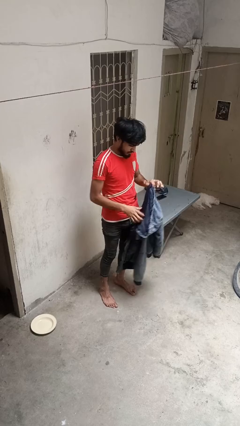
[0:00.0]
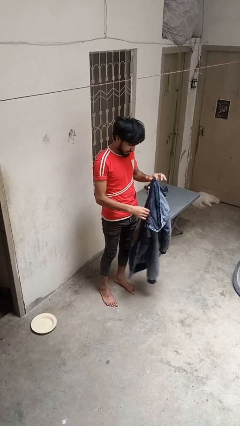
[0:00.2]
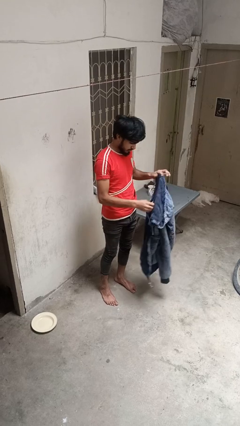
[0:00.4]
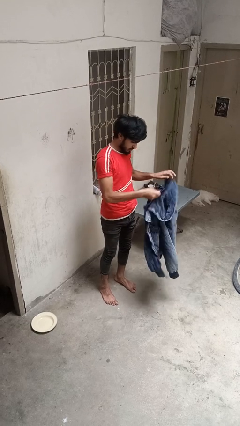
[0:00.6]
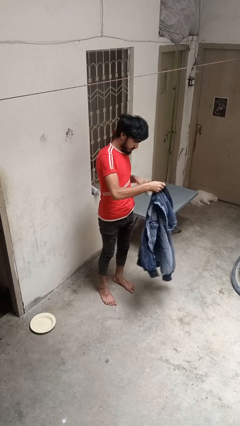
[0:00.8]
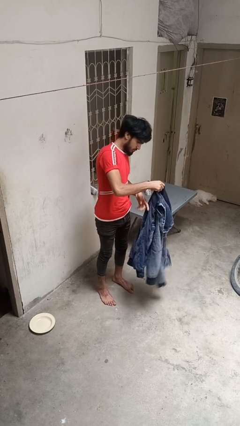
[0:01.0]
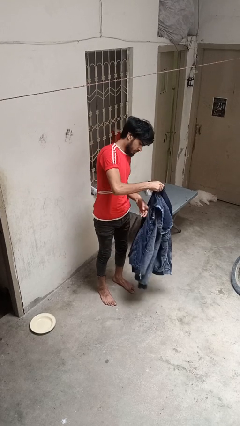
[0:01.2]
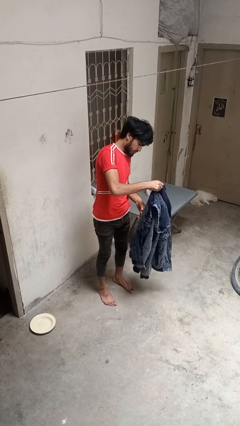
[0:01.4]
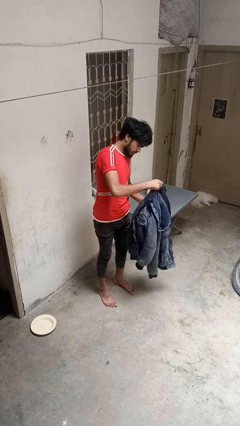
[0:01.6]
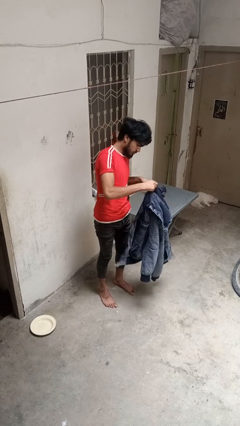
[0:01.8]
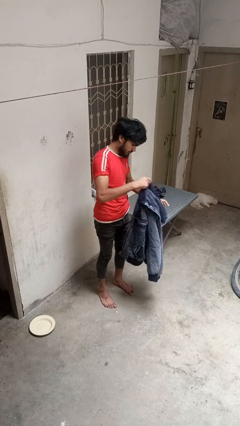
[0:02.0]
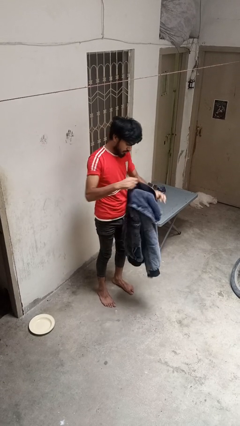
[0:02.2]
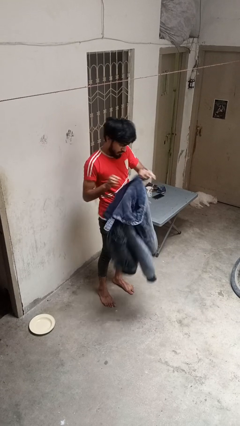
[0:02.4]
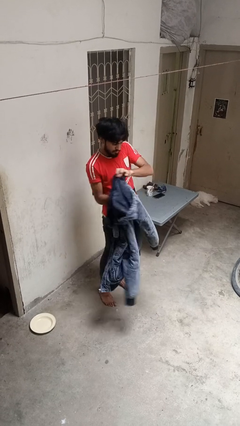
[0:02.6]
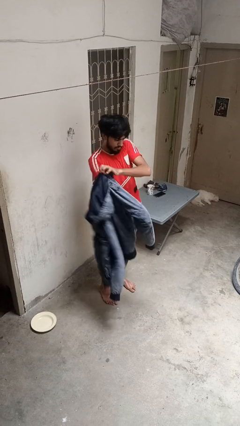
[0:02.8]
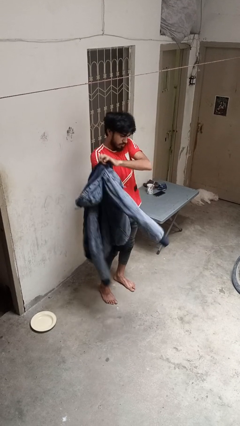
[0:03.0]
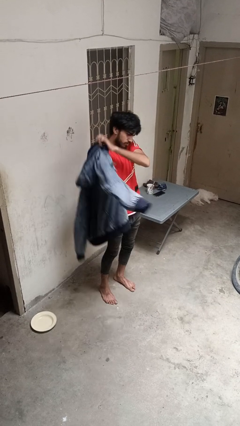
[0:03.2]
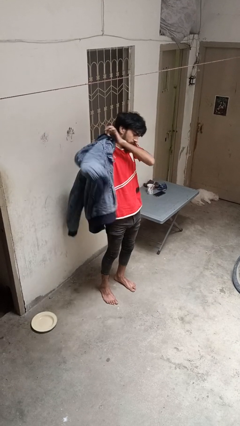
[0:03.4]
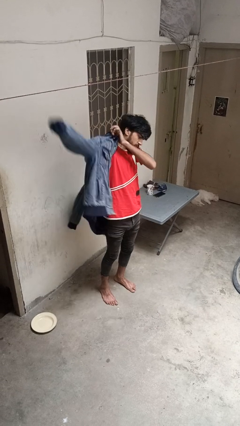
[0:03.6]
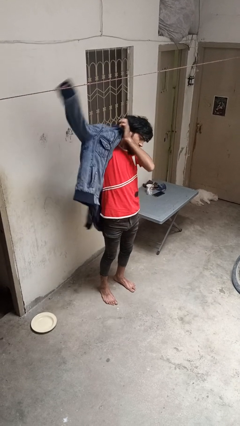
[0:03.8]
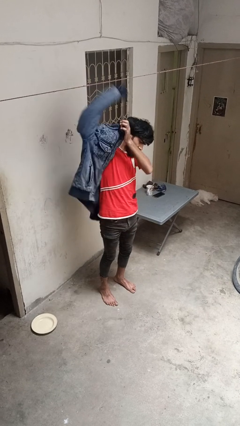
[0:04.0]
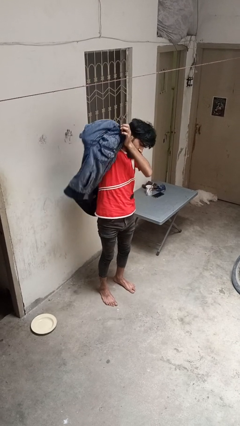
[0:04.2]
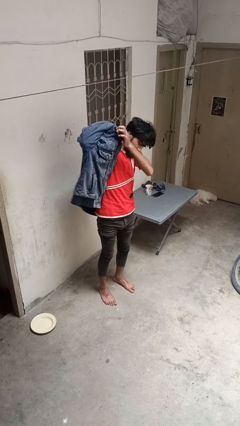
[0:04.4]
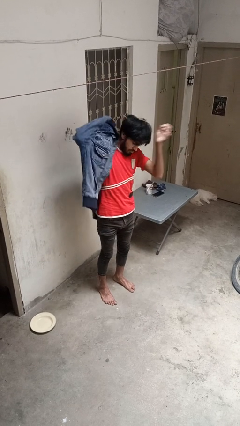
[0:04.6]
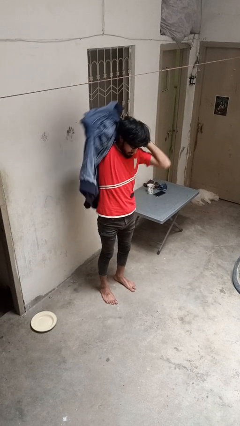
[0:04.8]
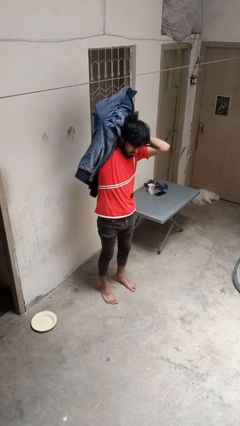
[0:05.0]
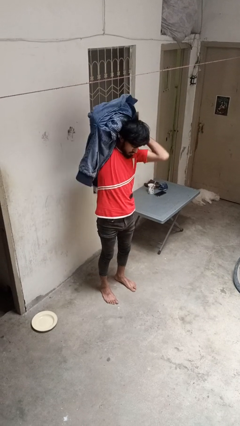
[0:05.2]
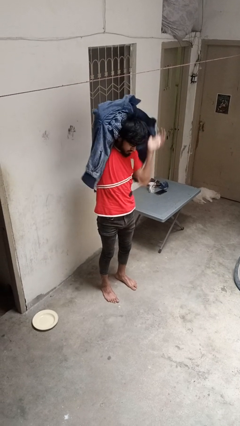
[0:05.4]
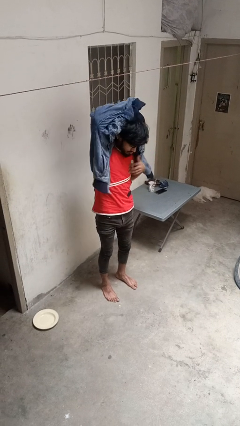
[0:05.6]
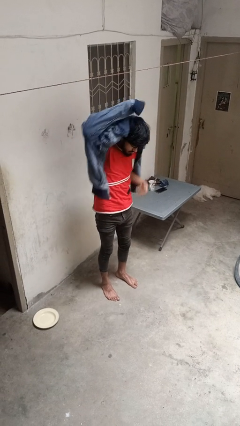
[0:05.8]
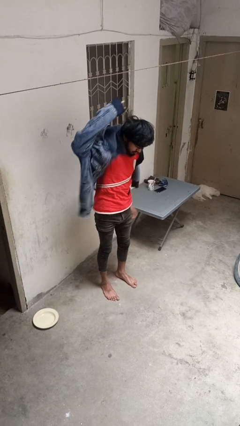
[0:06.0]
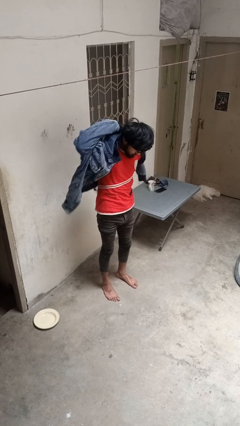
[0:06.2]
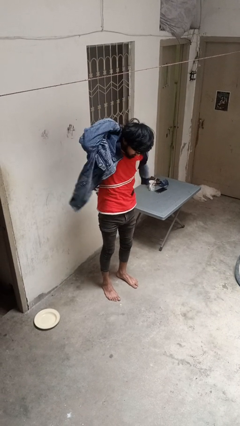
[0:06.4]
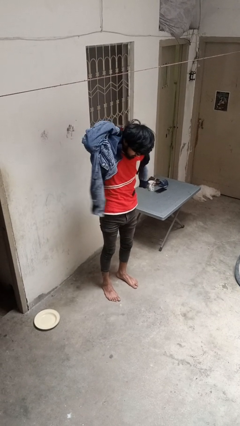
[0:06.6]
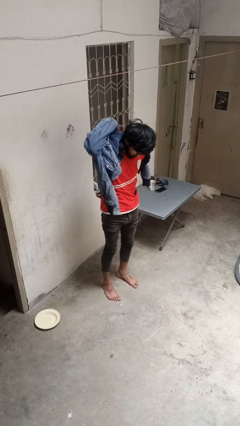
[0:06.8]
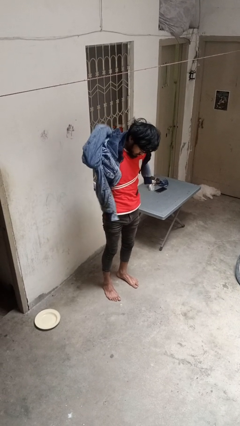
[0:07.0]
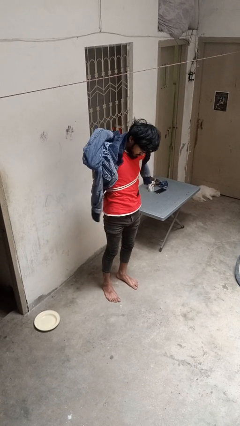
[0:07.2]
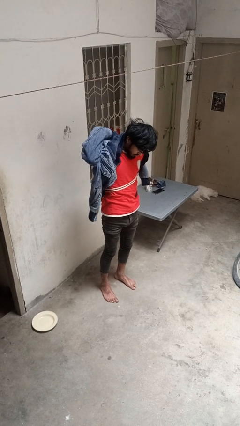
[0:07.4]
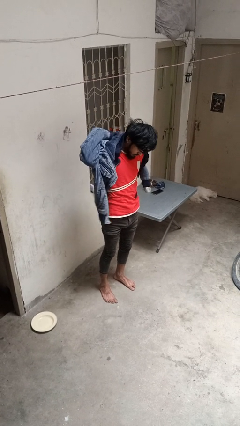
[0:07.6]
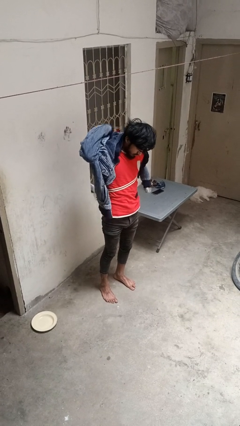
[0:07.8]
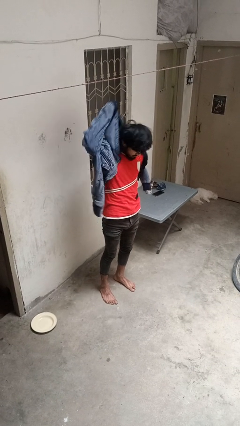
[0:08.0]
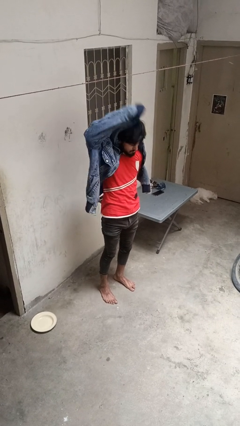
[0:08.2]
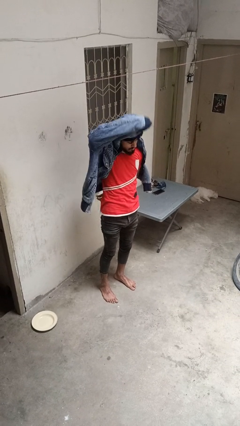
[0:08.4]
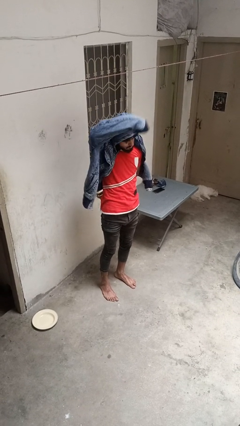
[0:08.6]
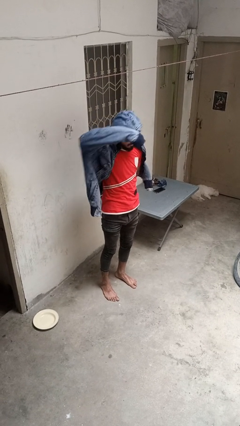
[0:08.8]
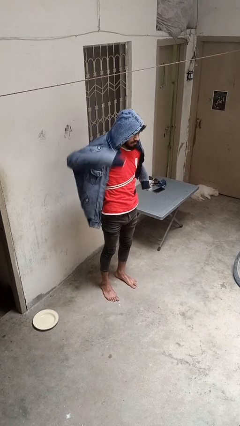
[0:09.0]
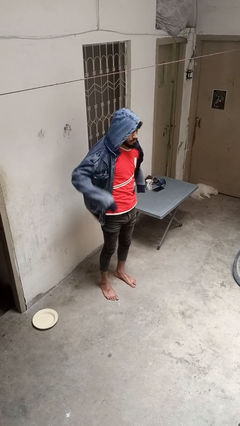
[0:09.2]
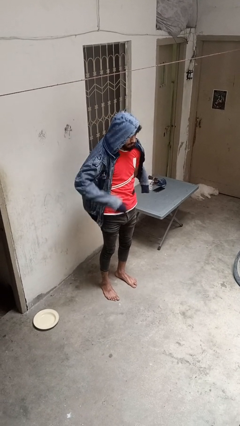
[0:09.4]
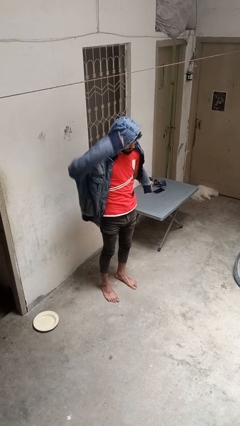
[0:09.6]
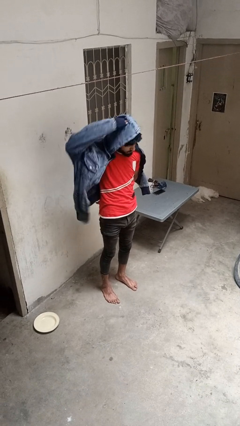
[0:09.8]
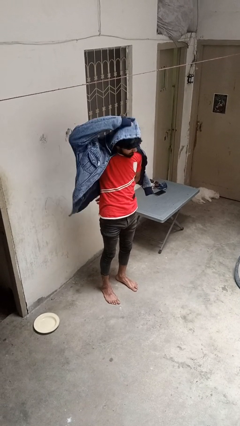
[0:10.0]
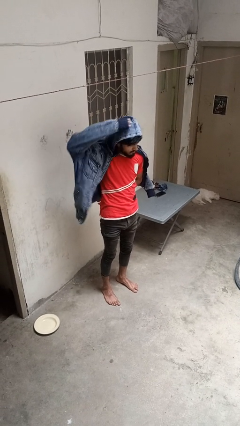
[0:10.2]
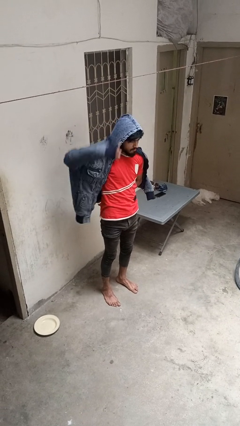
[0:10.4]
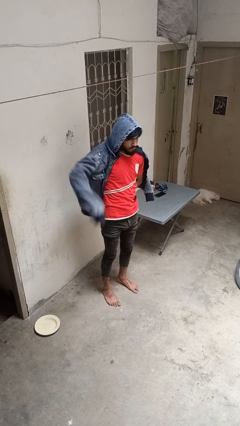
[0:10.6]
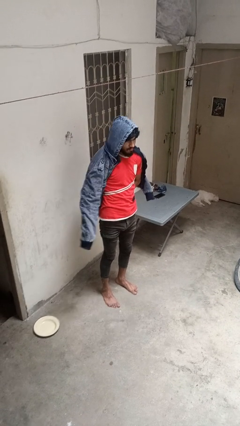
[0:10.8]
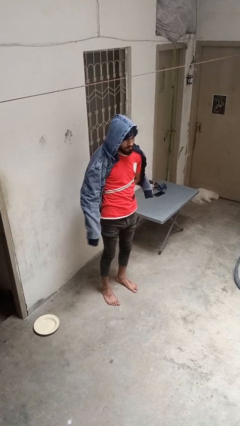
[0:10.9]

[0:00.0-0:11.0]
person puts on hoodie

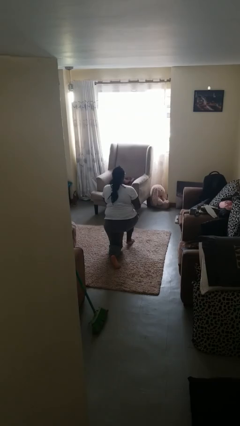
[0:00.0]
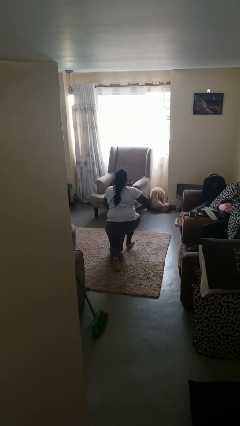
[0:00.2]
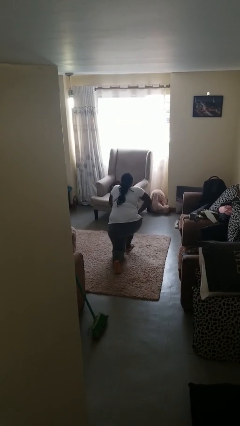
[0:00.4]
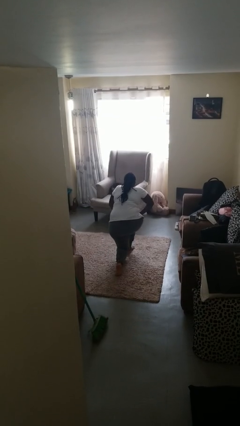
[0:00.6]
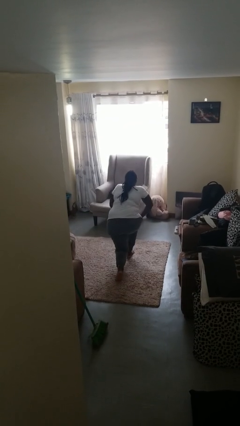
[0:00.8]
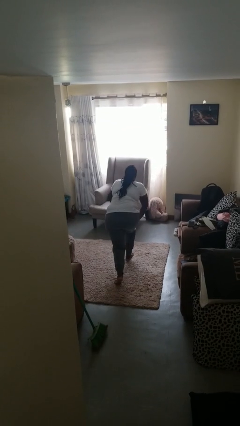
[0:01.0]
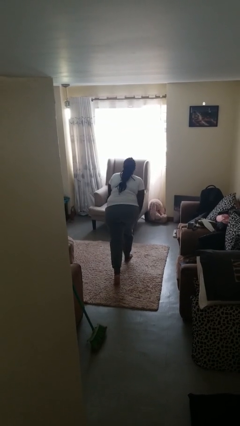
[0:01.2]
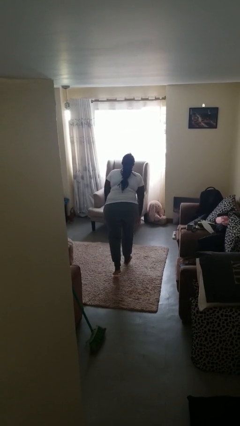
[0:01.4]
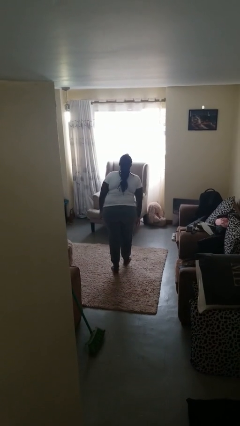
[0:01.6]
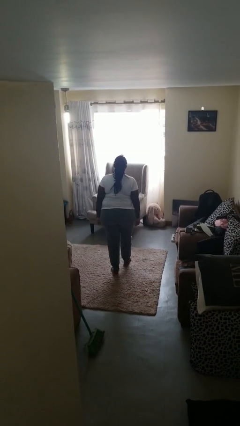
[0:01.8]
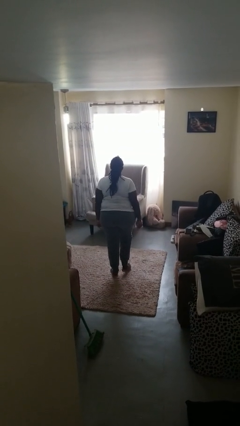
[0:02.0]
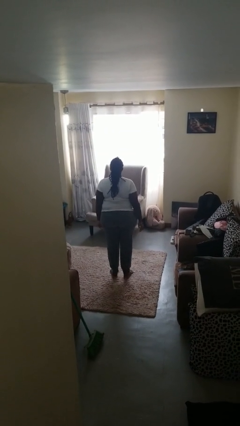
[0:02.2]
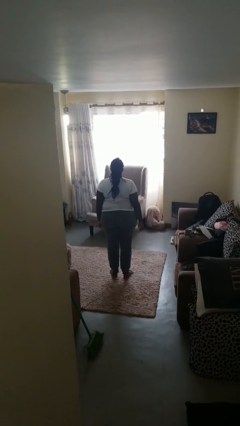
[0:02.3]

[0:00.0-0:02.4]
person stands up from floor

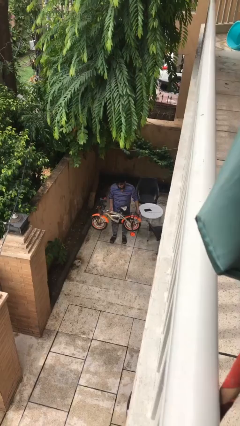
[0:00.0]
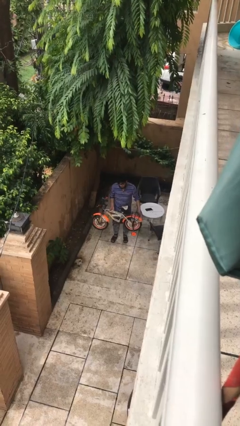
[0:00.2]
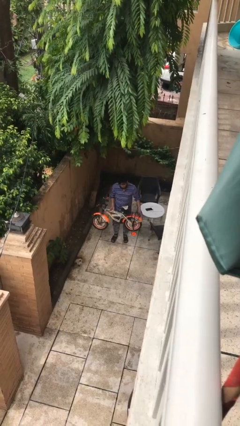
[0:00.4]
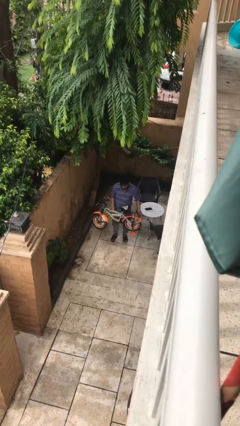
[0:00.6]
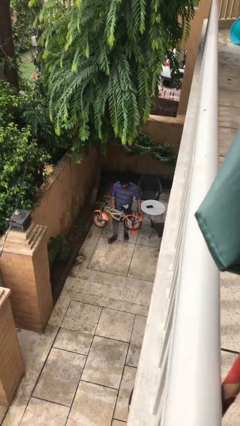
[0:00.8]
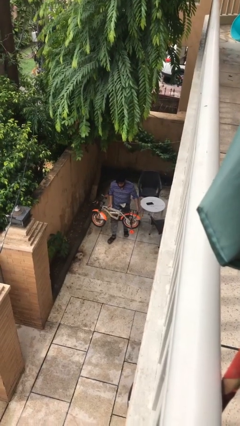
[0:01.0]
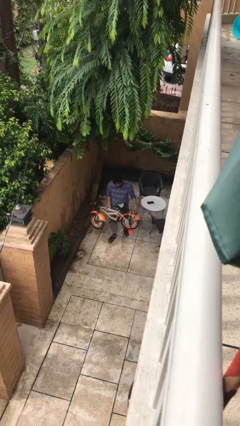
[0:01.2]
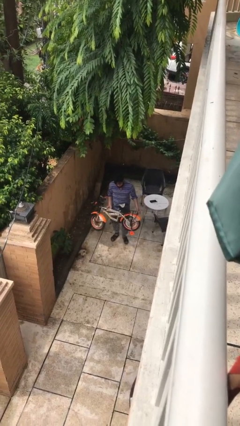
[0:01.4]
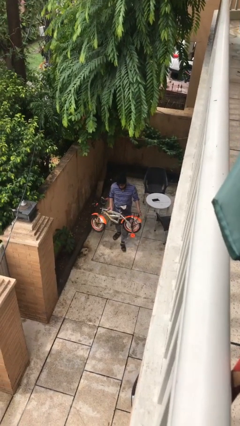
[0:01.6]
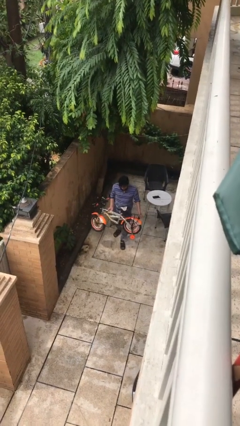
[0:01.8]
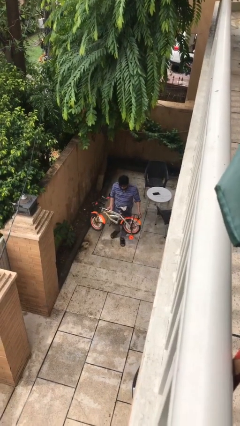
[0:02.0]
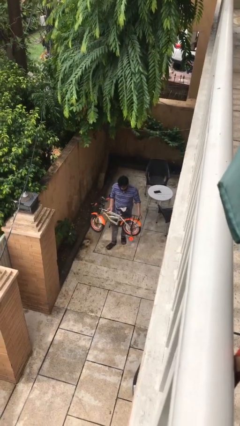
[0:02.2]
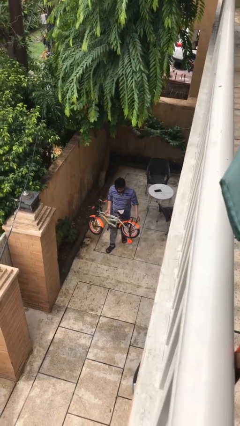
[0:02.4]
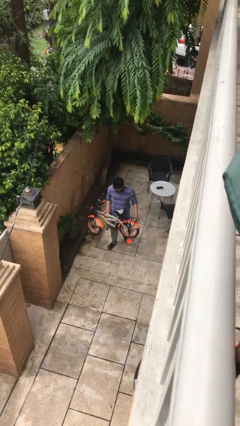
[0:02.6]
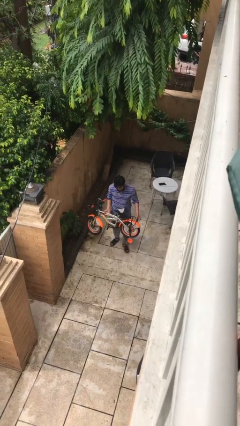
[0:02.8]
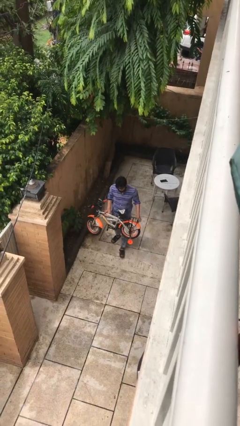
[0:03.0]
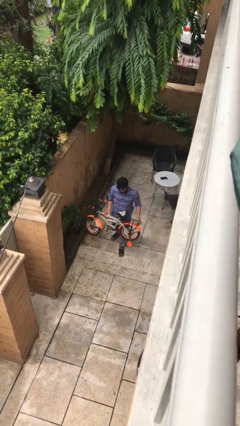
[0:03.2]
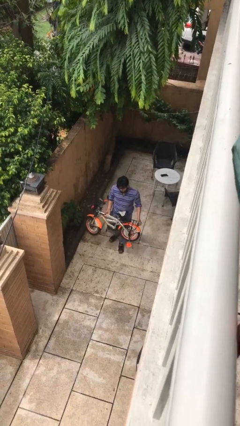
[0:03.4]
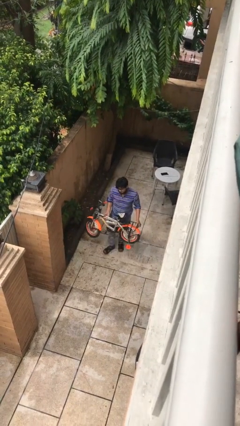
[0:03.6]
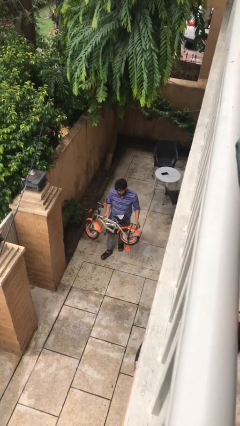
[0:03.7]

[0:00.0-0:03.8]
person carries heavy object

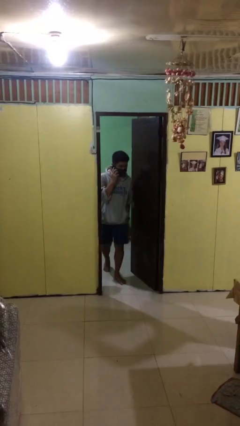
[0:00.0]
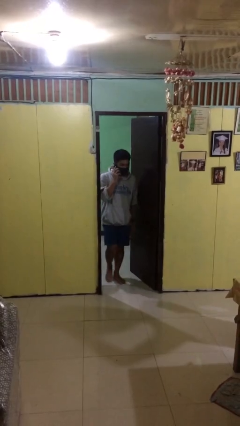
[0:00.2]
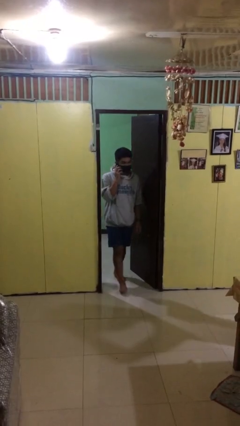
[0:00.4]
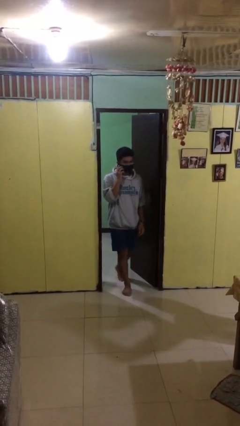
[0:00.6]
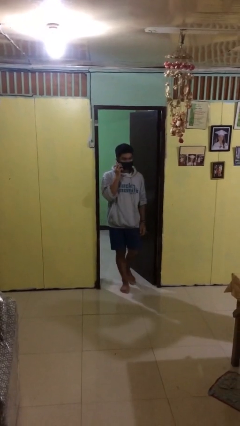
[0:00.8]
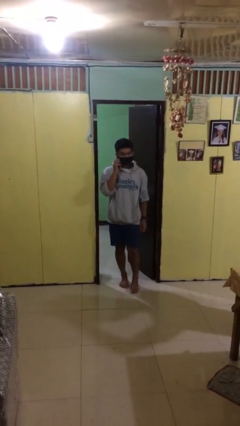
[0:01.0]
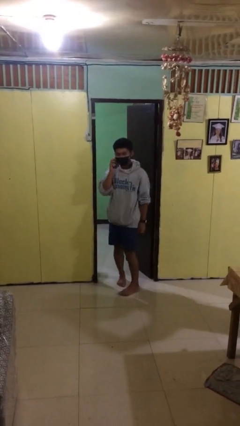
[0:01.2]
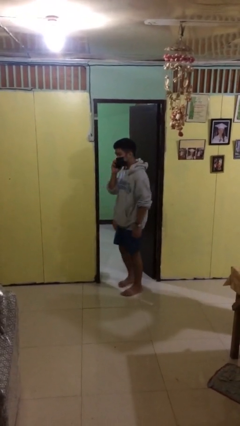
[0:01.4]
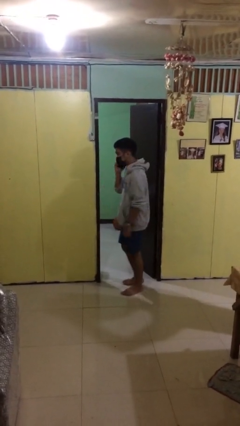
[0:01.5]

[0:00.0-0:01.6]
person enters scene through structure
